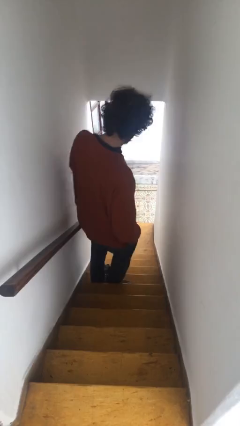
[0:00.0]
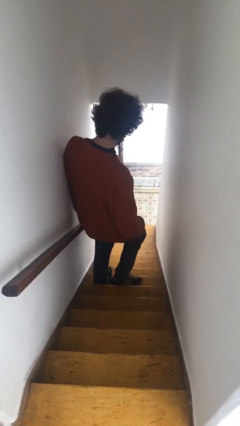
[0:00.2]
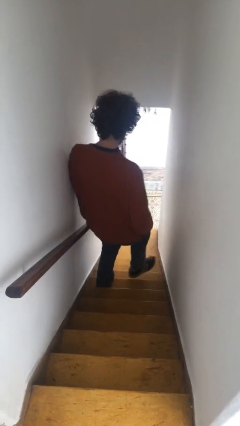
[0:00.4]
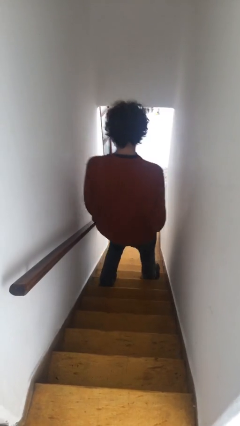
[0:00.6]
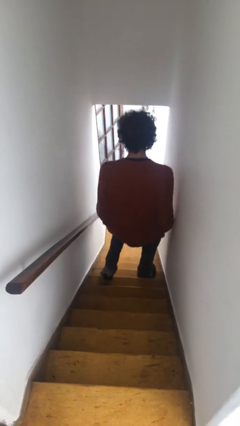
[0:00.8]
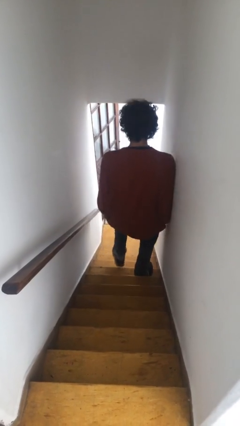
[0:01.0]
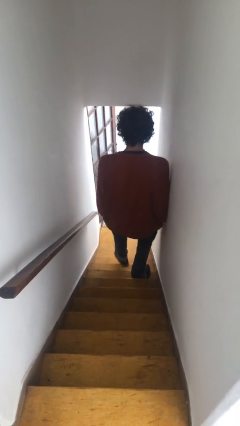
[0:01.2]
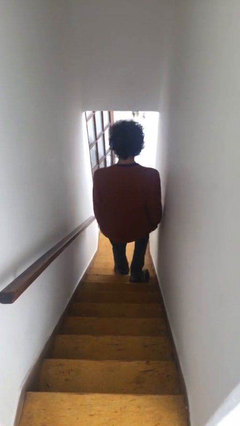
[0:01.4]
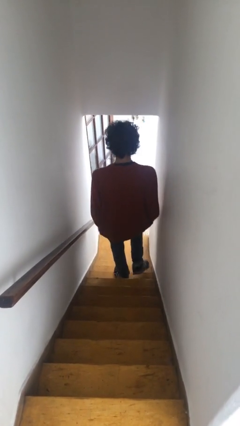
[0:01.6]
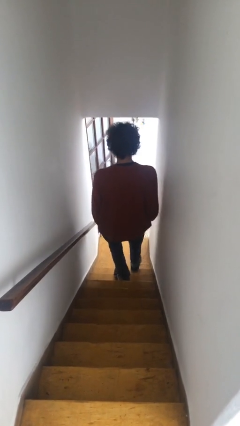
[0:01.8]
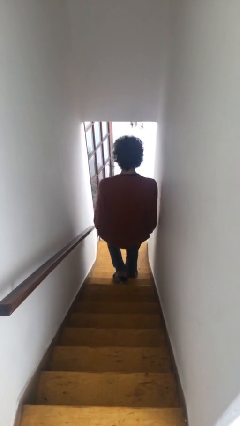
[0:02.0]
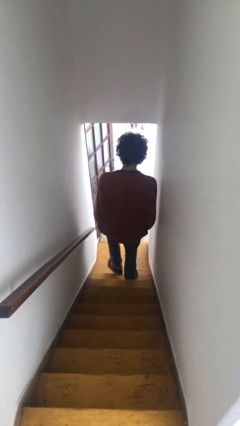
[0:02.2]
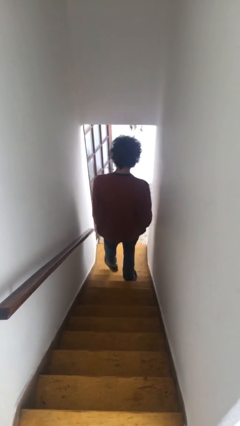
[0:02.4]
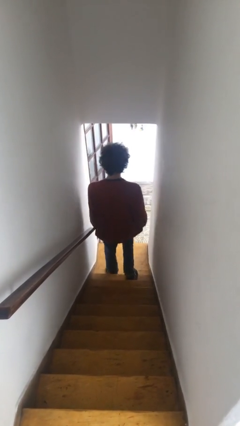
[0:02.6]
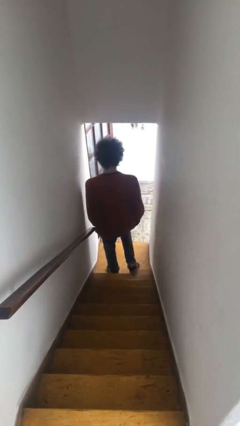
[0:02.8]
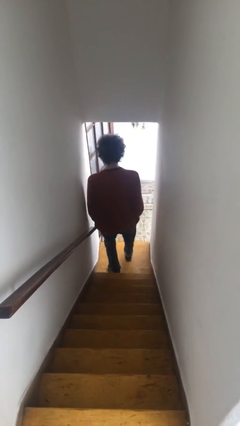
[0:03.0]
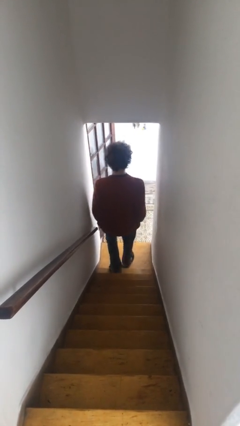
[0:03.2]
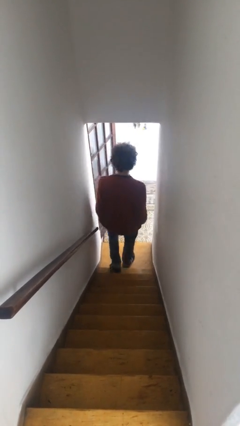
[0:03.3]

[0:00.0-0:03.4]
person climbs down stairs

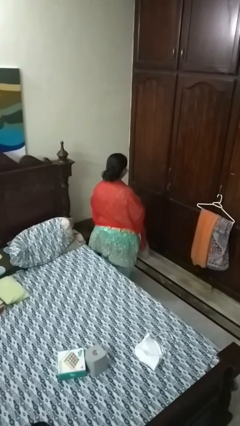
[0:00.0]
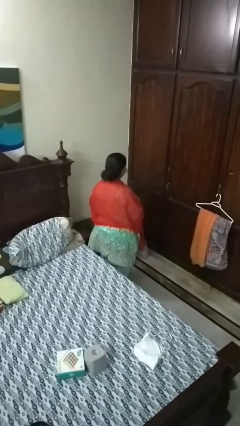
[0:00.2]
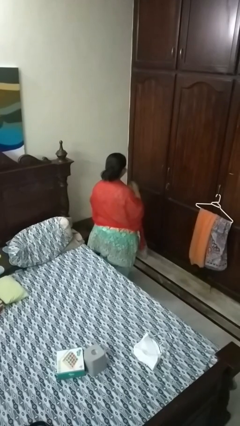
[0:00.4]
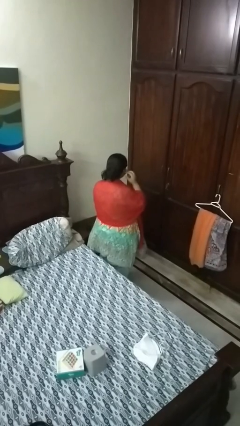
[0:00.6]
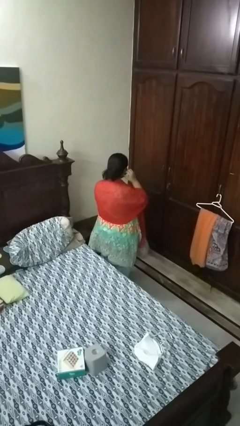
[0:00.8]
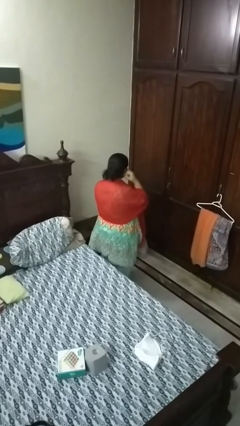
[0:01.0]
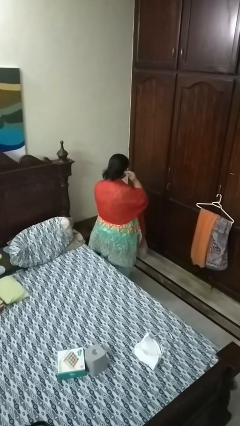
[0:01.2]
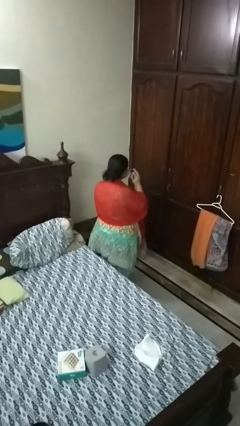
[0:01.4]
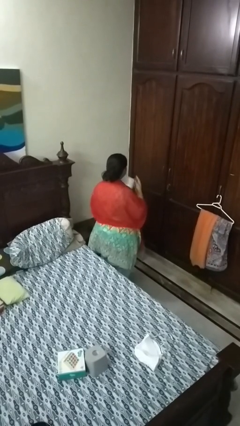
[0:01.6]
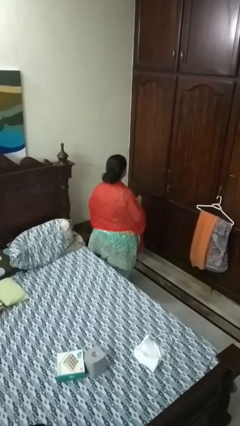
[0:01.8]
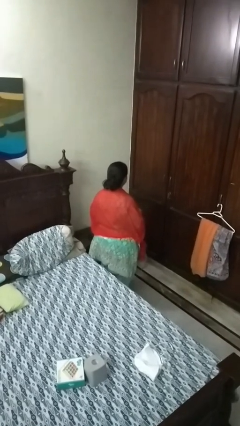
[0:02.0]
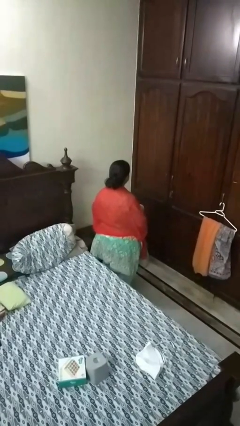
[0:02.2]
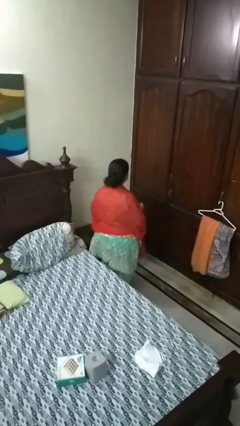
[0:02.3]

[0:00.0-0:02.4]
person takes off facemask

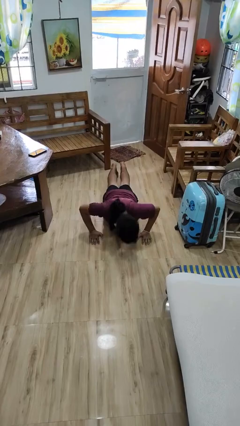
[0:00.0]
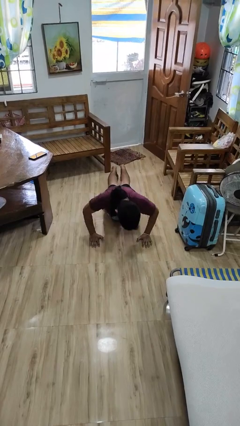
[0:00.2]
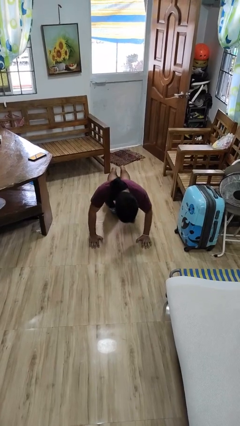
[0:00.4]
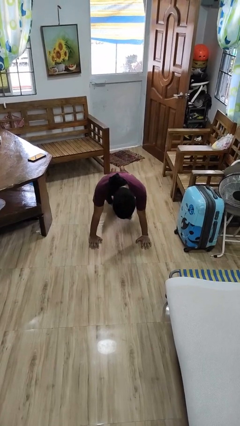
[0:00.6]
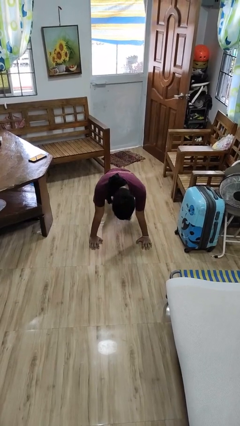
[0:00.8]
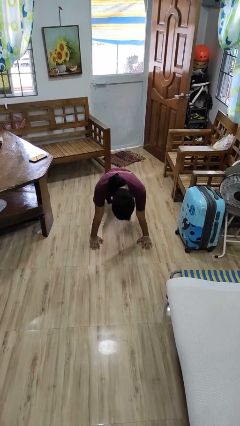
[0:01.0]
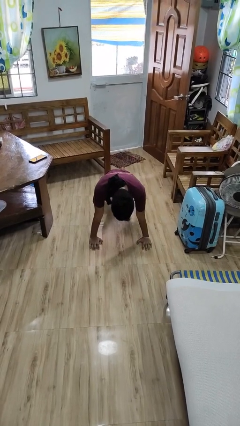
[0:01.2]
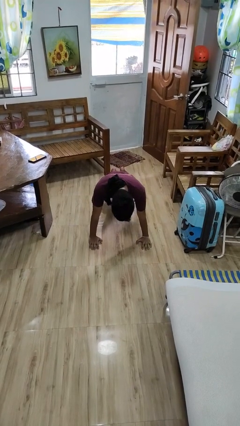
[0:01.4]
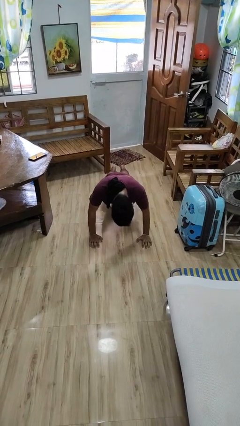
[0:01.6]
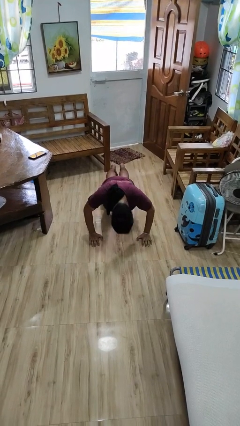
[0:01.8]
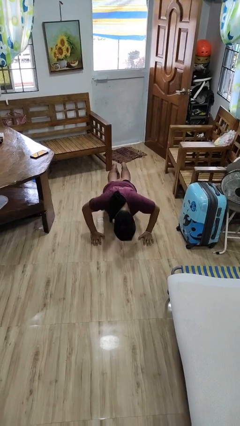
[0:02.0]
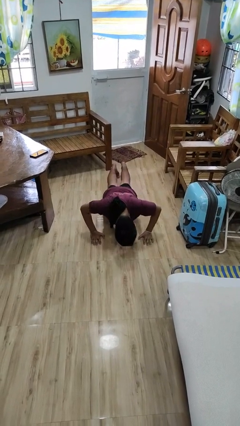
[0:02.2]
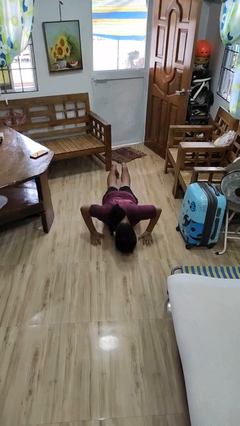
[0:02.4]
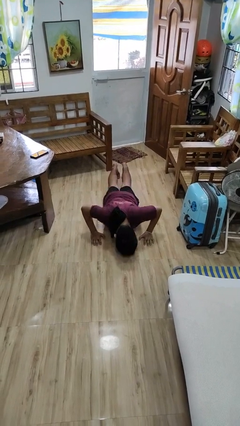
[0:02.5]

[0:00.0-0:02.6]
person exercises with pushup

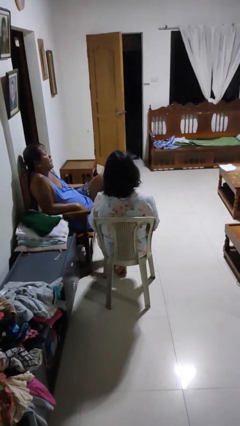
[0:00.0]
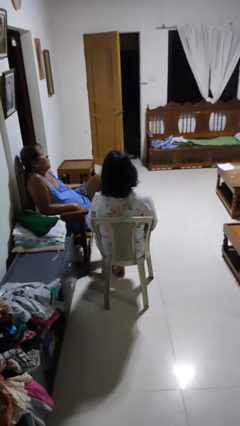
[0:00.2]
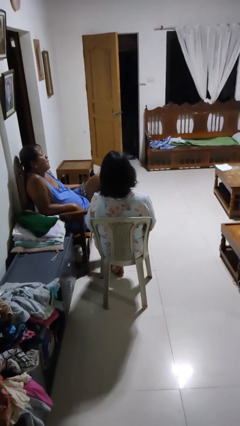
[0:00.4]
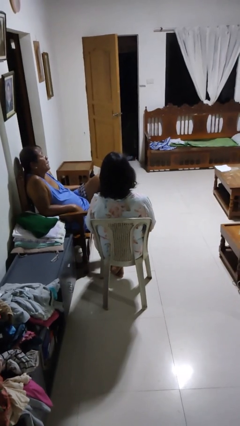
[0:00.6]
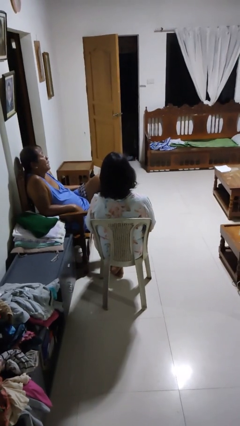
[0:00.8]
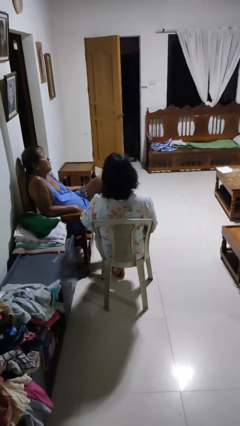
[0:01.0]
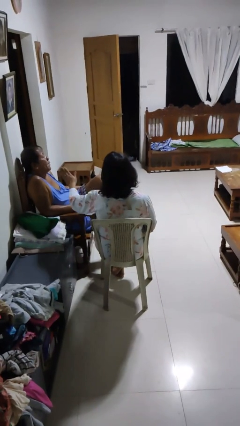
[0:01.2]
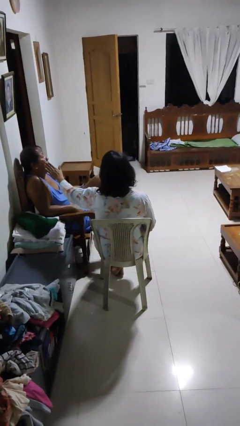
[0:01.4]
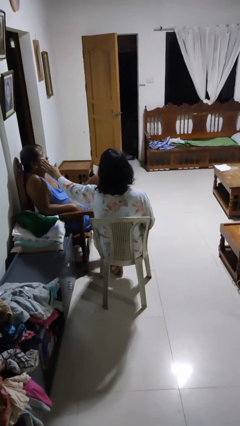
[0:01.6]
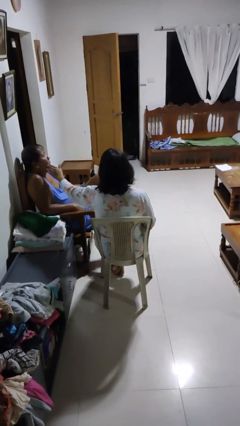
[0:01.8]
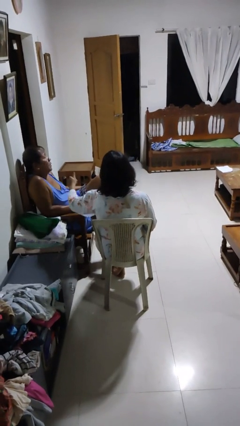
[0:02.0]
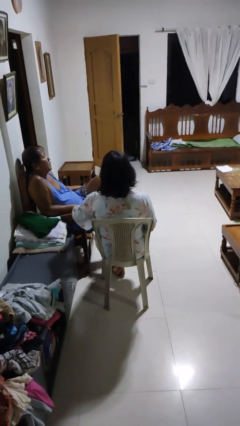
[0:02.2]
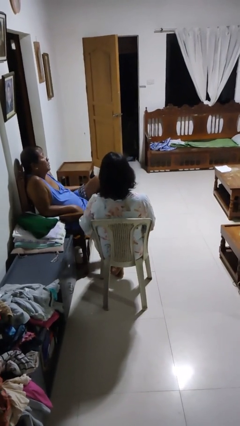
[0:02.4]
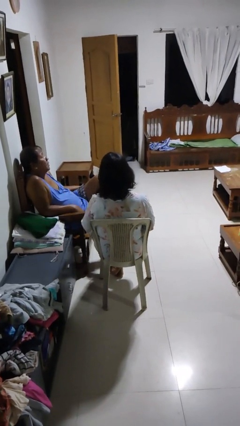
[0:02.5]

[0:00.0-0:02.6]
person touches face of person

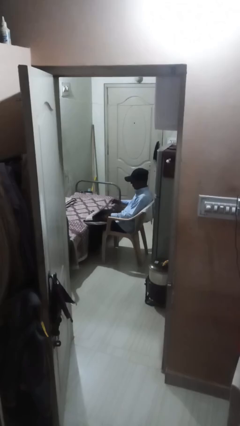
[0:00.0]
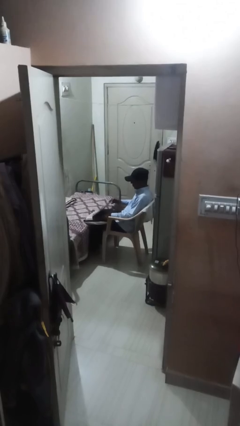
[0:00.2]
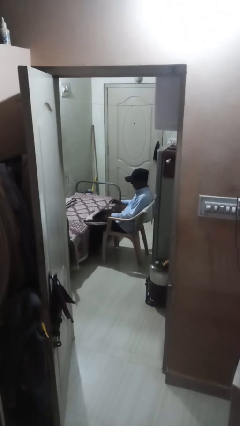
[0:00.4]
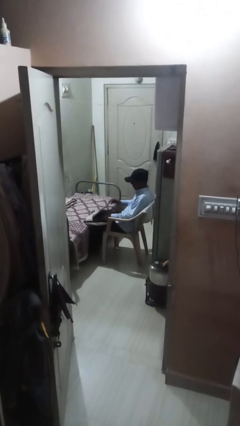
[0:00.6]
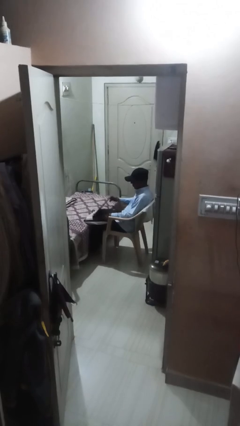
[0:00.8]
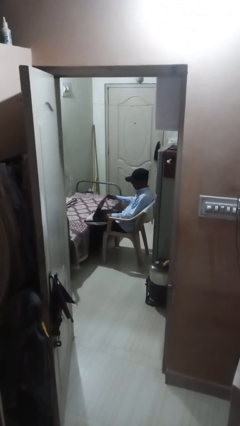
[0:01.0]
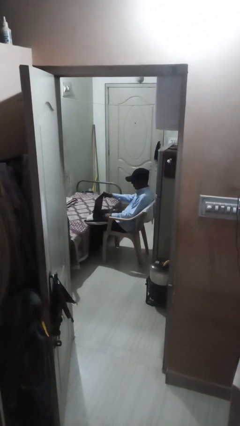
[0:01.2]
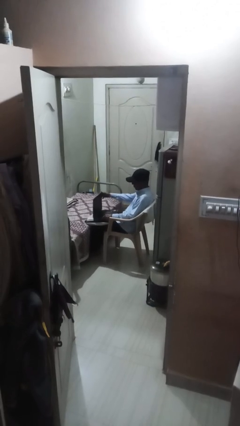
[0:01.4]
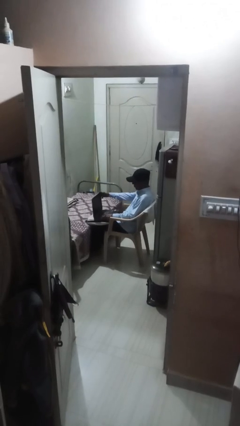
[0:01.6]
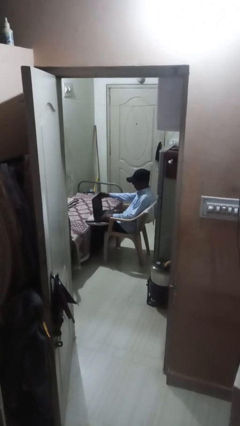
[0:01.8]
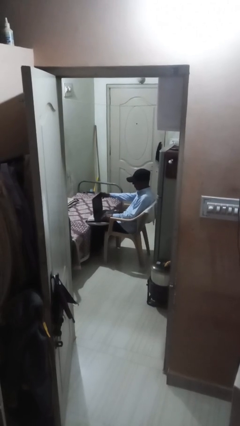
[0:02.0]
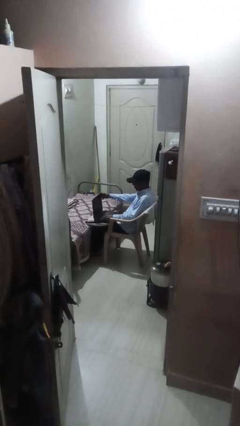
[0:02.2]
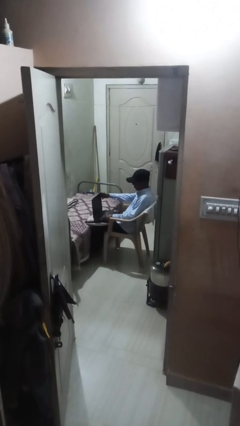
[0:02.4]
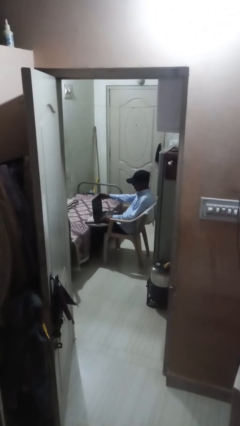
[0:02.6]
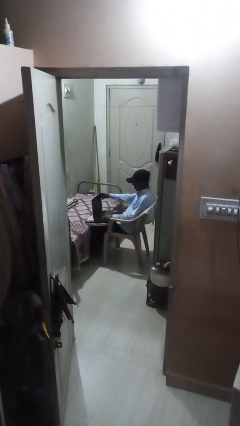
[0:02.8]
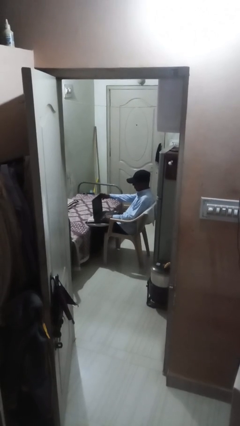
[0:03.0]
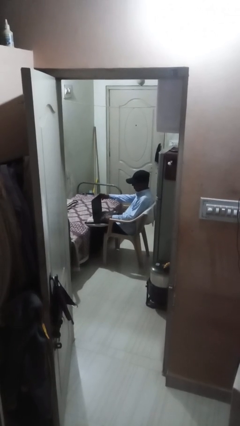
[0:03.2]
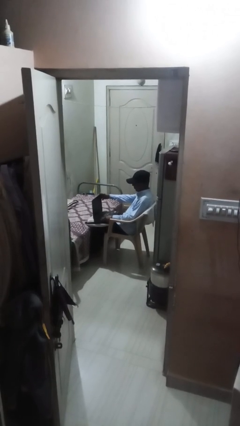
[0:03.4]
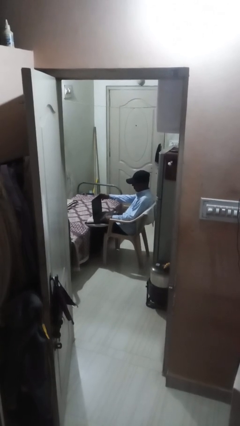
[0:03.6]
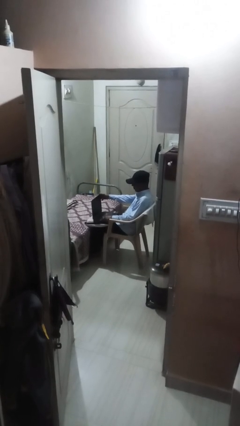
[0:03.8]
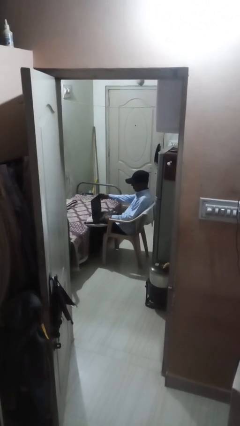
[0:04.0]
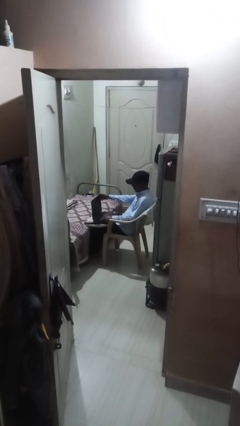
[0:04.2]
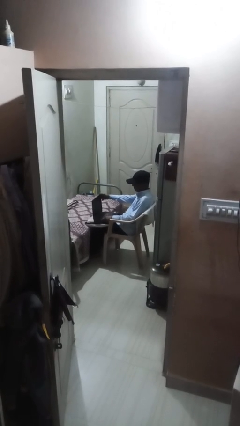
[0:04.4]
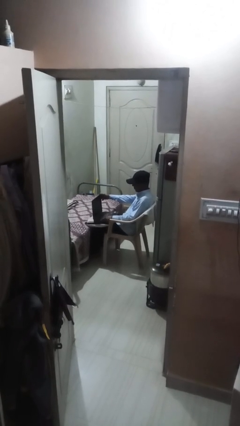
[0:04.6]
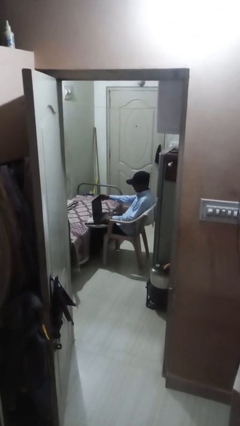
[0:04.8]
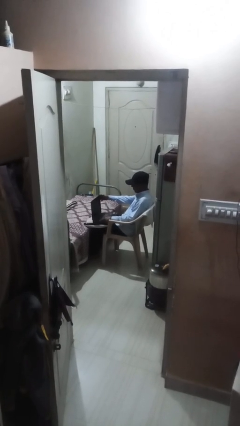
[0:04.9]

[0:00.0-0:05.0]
person interacts with laptop

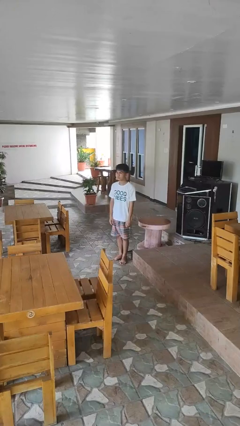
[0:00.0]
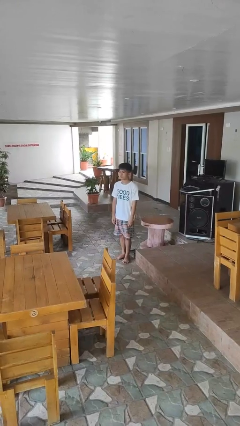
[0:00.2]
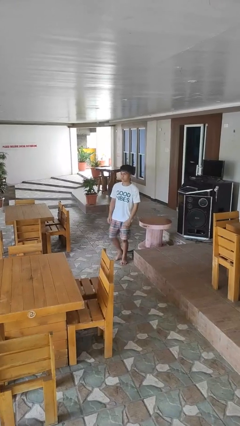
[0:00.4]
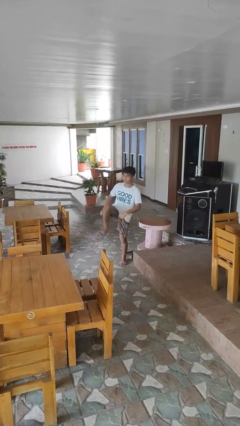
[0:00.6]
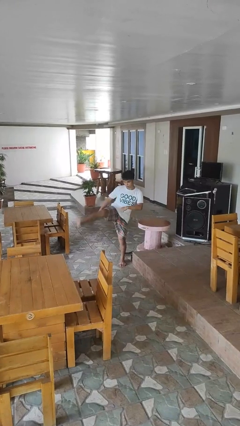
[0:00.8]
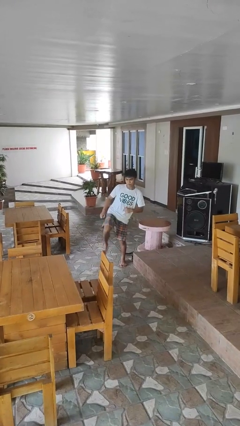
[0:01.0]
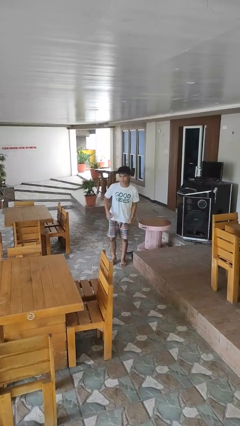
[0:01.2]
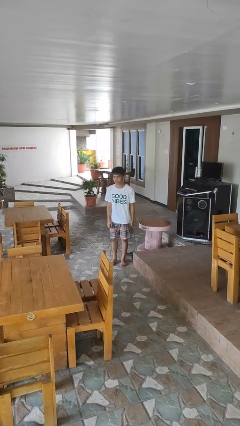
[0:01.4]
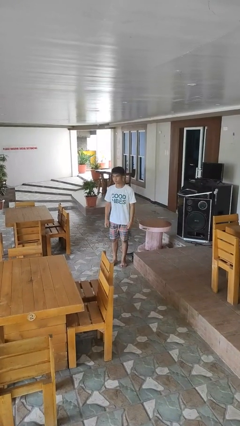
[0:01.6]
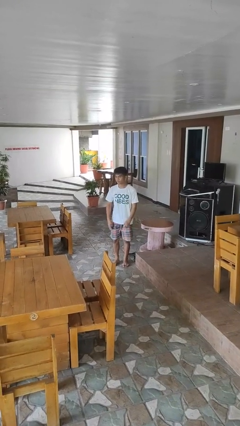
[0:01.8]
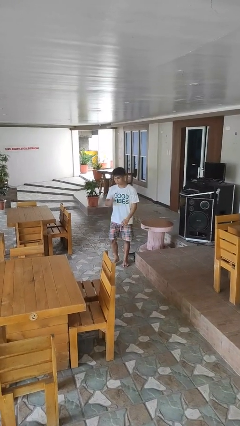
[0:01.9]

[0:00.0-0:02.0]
person karate kicks
